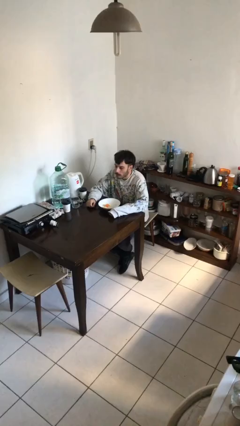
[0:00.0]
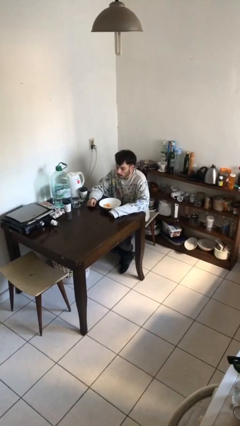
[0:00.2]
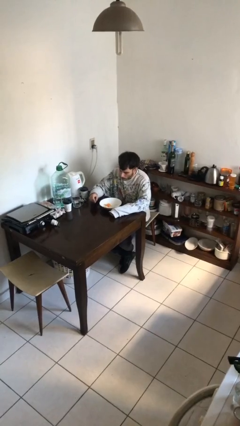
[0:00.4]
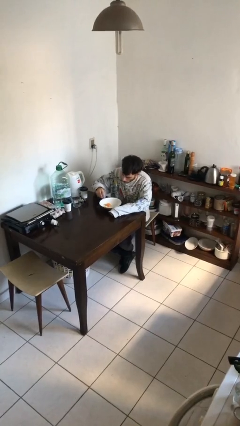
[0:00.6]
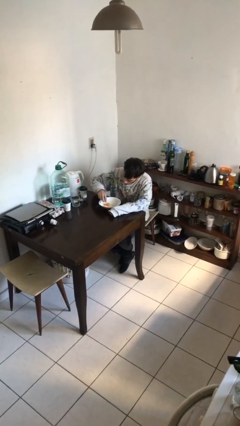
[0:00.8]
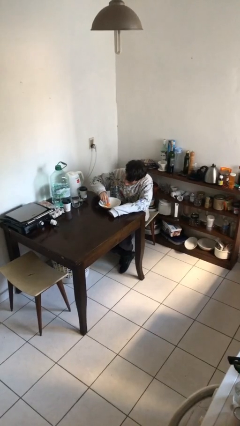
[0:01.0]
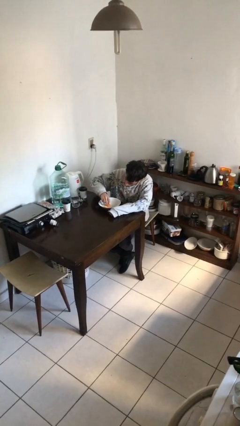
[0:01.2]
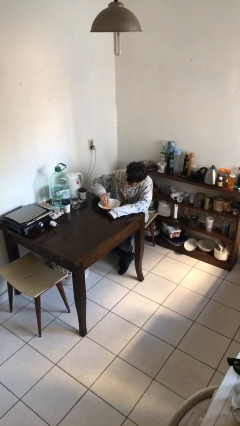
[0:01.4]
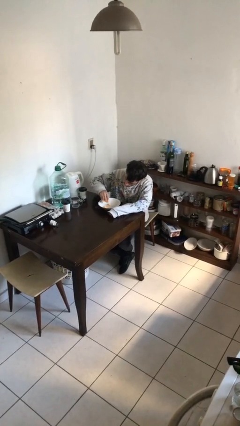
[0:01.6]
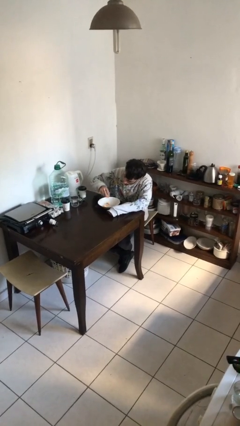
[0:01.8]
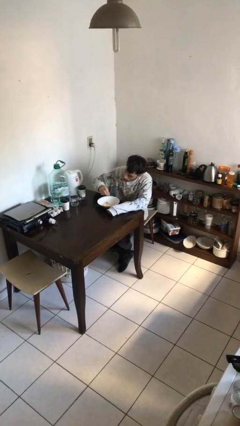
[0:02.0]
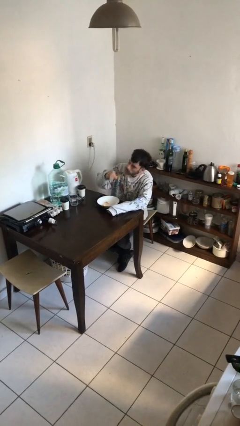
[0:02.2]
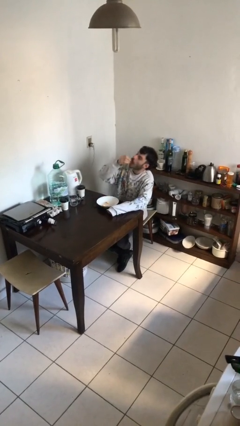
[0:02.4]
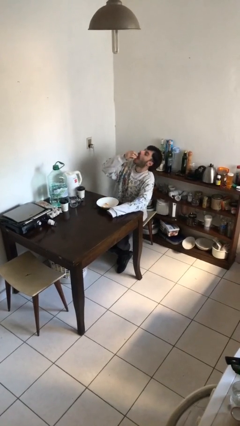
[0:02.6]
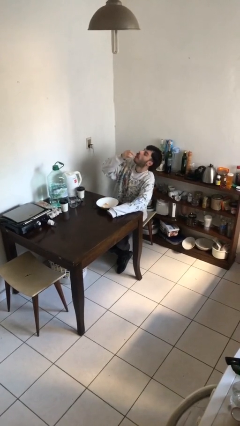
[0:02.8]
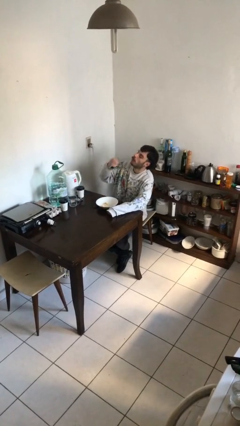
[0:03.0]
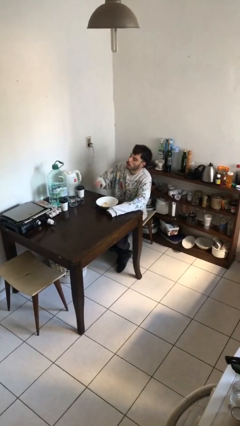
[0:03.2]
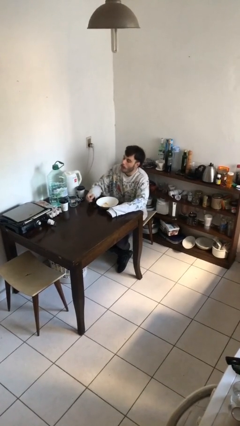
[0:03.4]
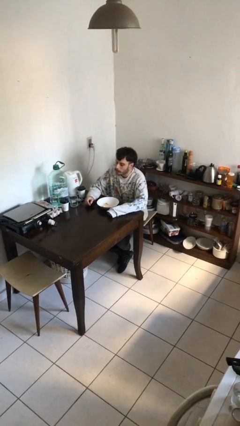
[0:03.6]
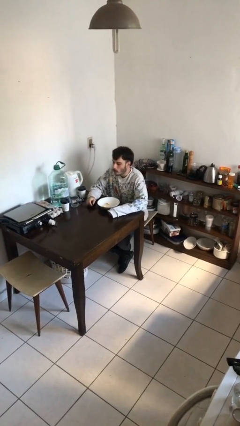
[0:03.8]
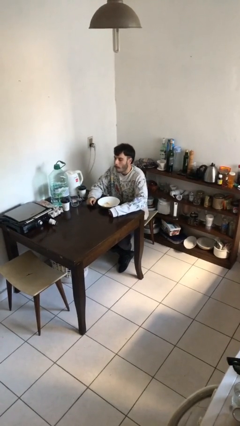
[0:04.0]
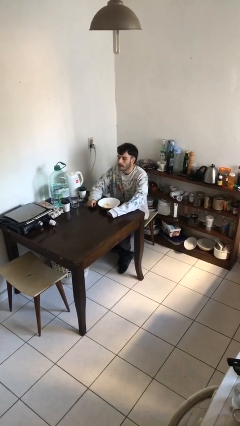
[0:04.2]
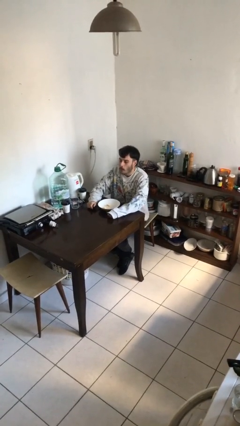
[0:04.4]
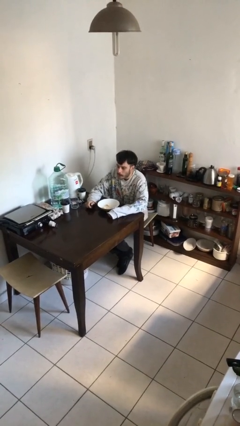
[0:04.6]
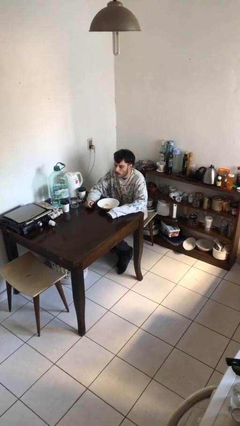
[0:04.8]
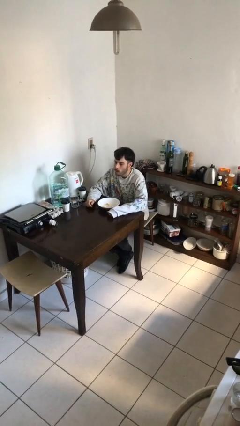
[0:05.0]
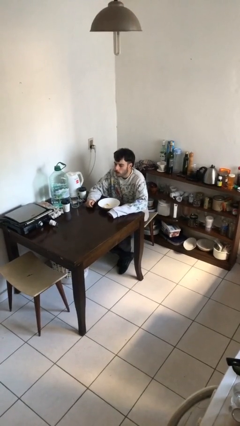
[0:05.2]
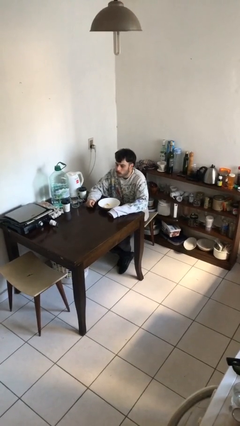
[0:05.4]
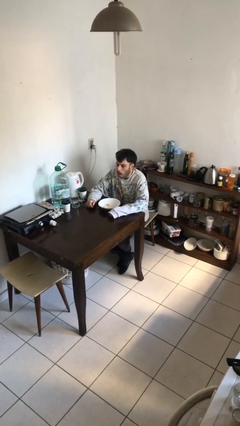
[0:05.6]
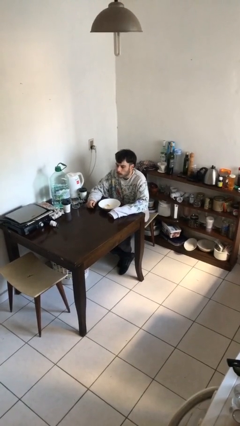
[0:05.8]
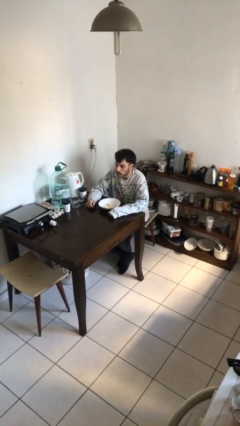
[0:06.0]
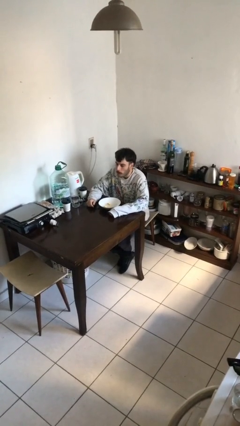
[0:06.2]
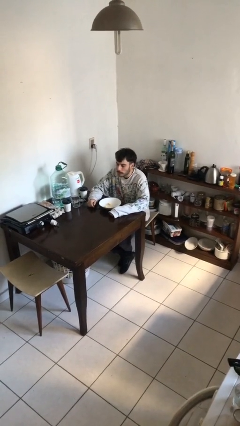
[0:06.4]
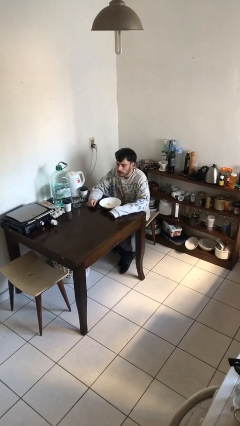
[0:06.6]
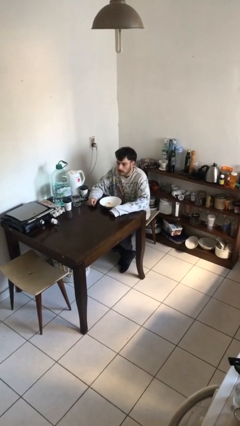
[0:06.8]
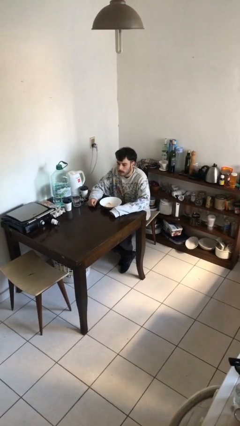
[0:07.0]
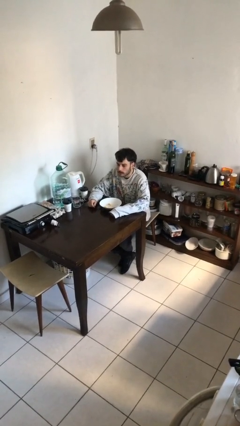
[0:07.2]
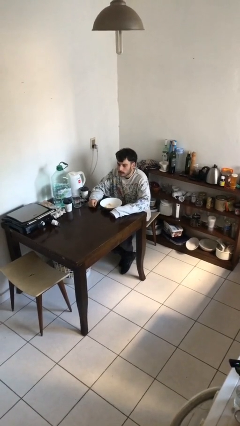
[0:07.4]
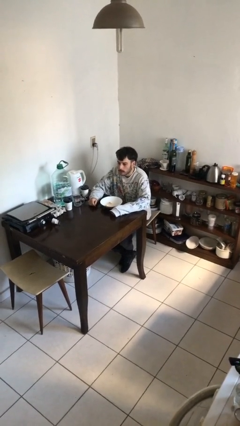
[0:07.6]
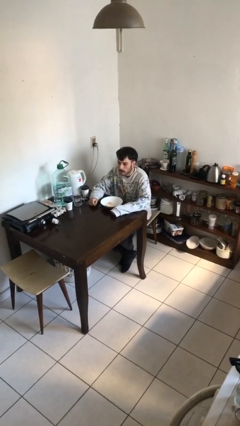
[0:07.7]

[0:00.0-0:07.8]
person eats with hands

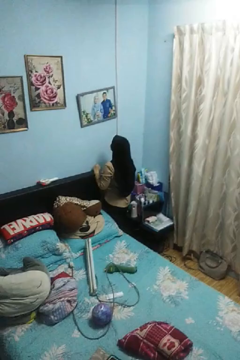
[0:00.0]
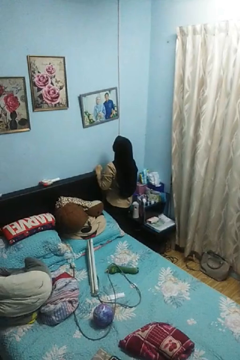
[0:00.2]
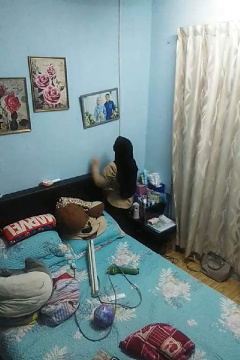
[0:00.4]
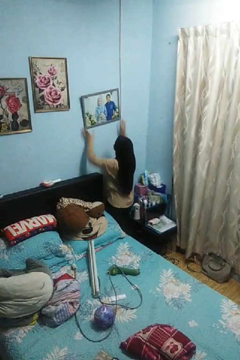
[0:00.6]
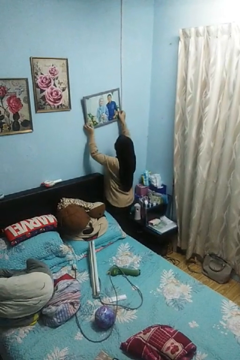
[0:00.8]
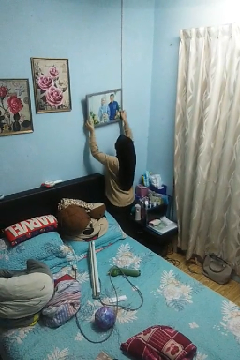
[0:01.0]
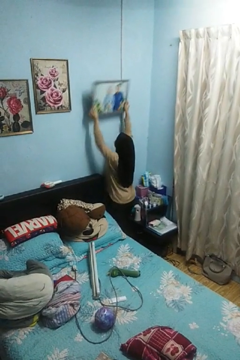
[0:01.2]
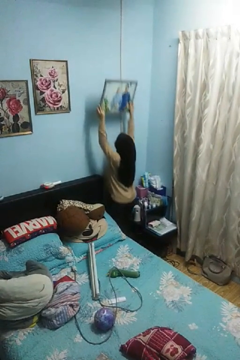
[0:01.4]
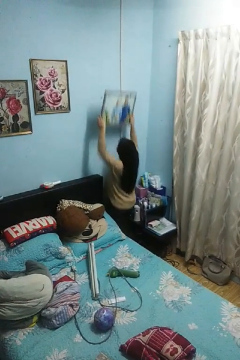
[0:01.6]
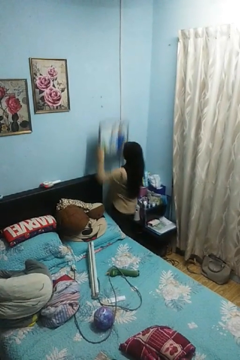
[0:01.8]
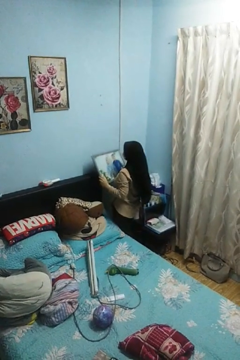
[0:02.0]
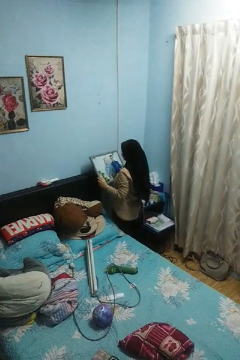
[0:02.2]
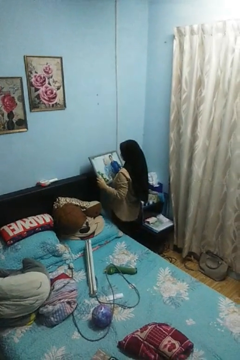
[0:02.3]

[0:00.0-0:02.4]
person takes down picture frame

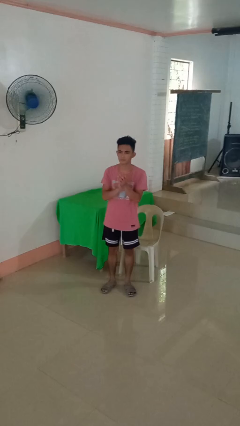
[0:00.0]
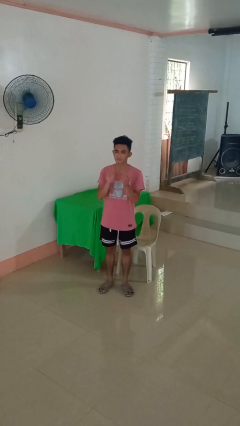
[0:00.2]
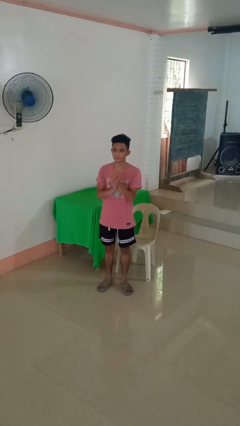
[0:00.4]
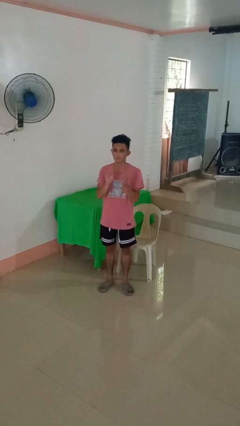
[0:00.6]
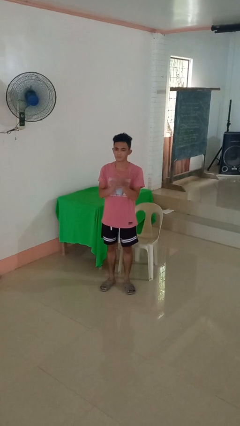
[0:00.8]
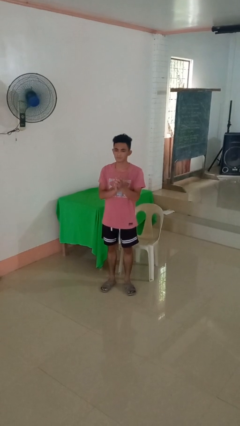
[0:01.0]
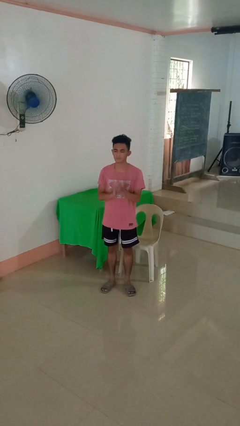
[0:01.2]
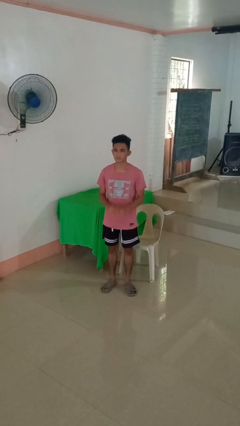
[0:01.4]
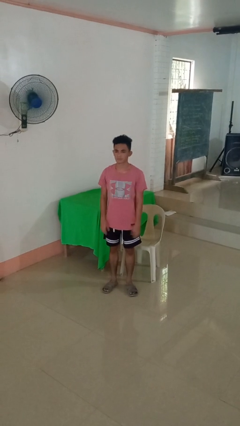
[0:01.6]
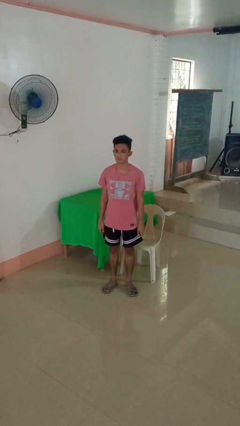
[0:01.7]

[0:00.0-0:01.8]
person claps hands

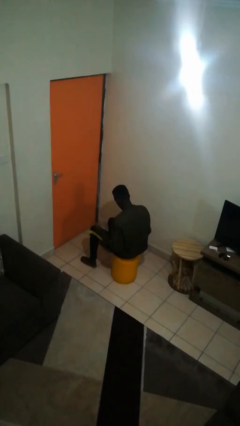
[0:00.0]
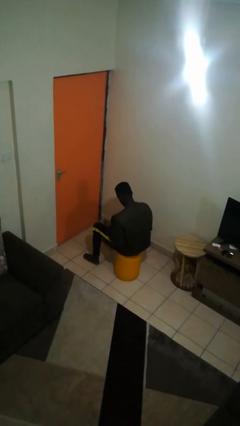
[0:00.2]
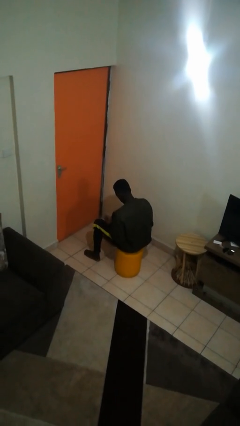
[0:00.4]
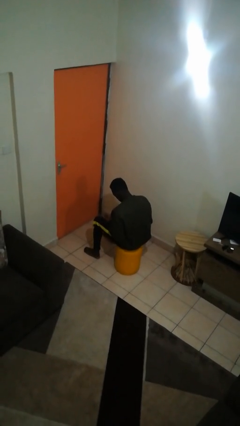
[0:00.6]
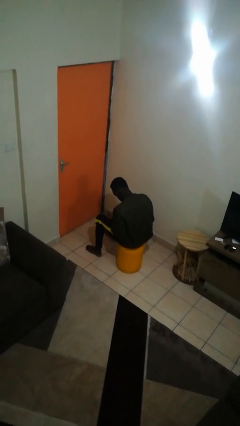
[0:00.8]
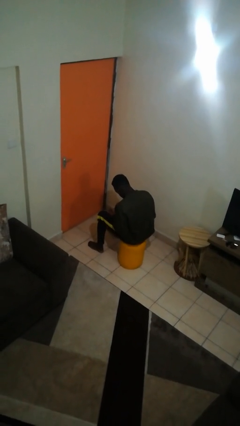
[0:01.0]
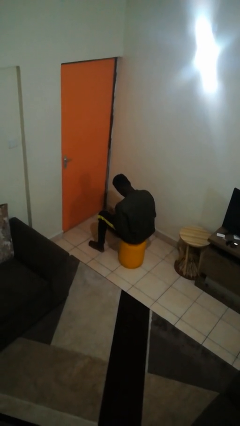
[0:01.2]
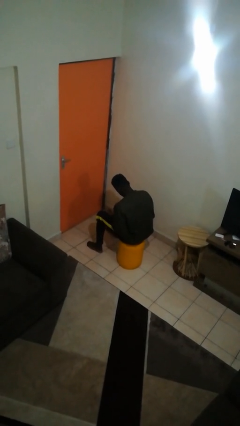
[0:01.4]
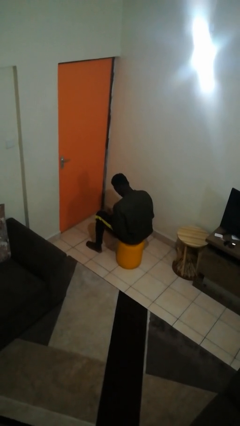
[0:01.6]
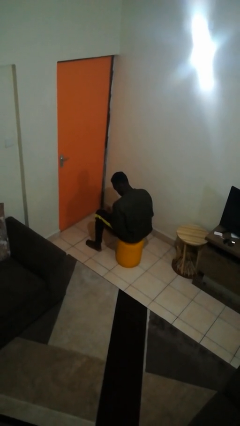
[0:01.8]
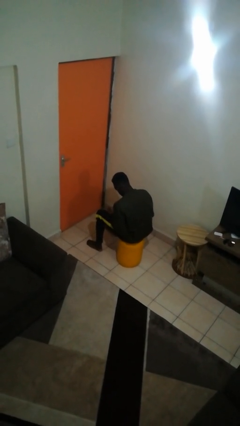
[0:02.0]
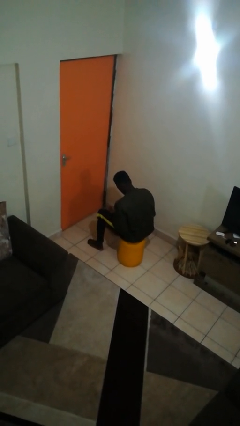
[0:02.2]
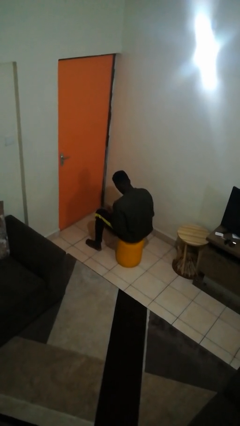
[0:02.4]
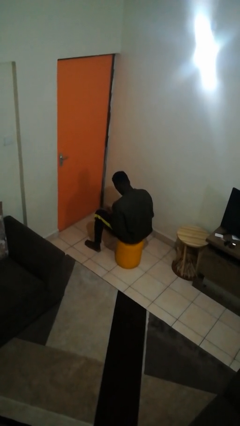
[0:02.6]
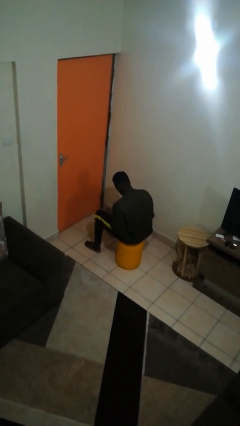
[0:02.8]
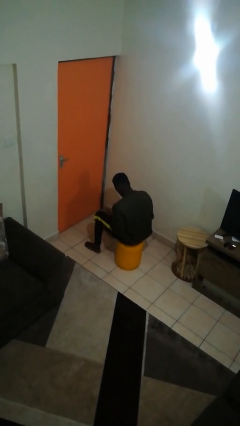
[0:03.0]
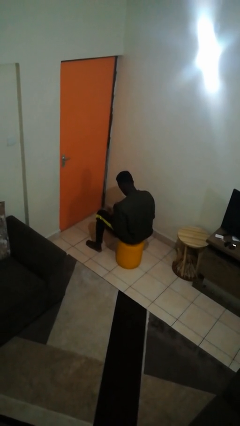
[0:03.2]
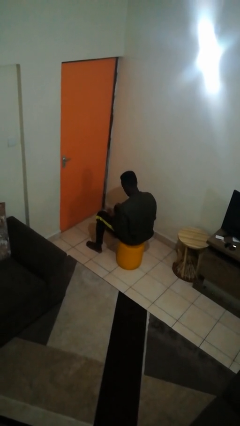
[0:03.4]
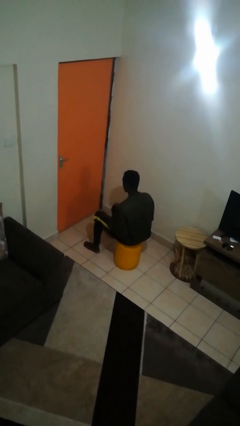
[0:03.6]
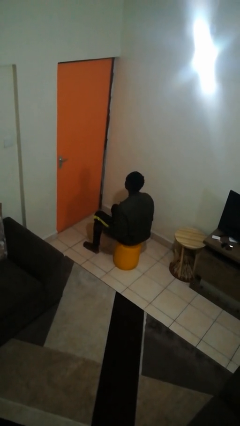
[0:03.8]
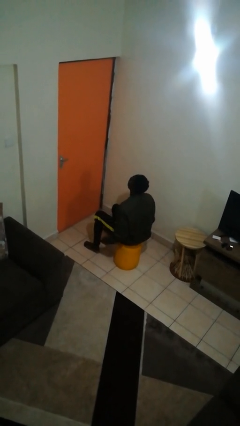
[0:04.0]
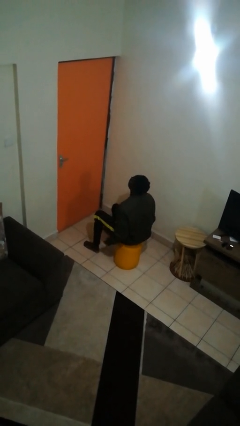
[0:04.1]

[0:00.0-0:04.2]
person looks at hands in lap

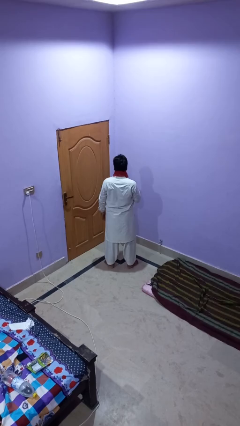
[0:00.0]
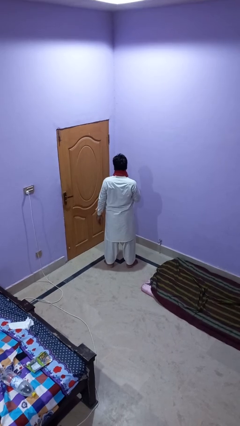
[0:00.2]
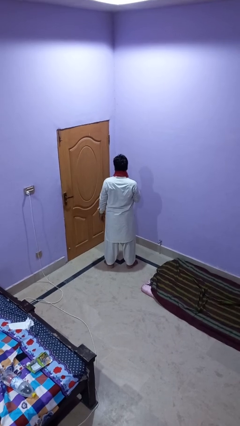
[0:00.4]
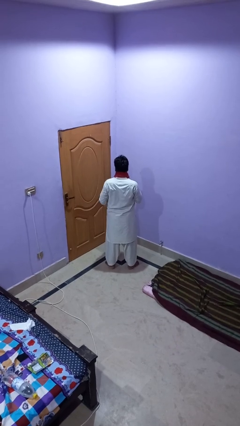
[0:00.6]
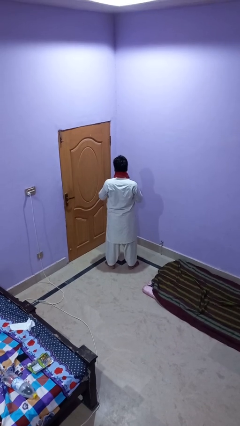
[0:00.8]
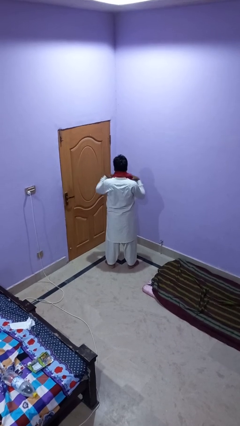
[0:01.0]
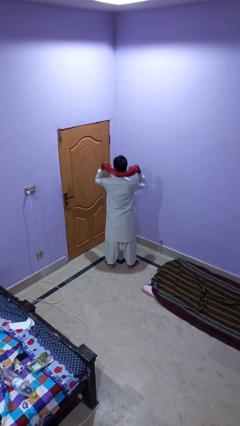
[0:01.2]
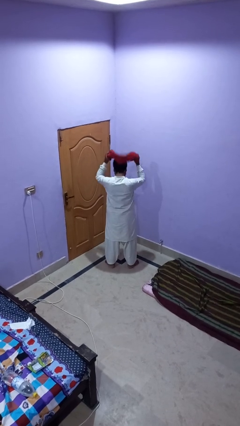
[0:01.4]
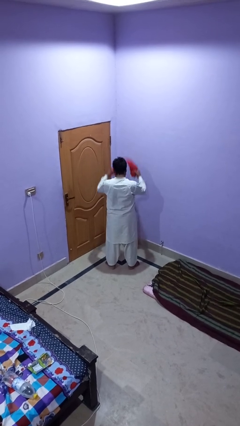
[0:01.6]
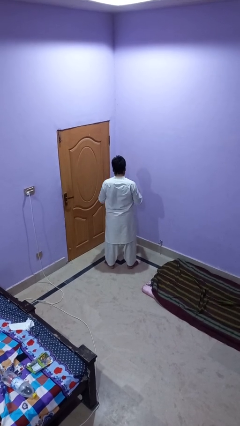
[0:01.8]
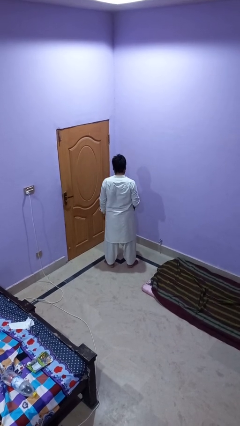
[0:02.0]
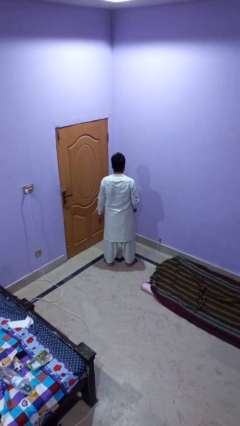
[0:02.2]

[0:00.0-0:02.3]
person takes off scarf
